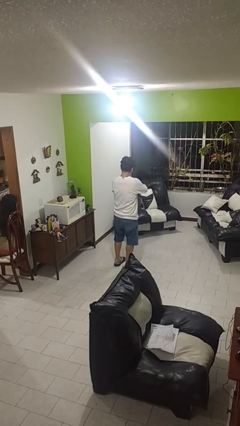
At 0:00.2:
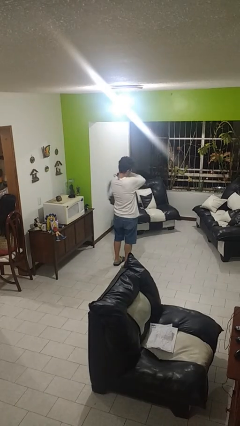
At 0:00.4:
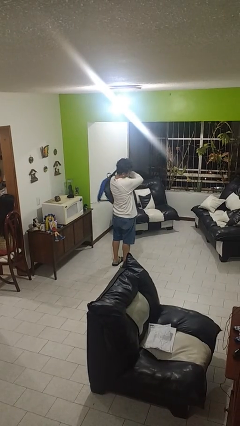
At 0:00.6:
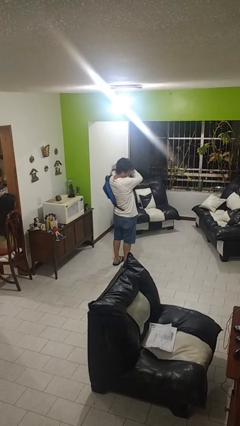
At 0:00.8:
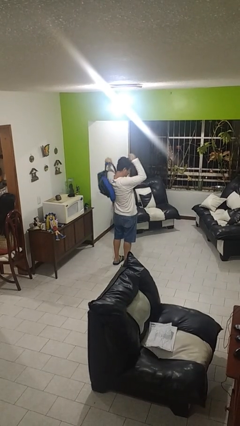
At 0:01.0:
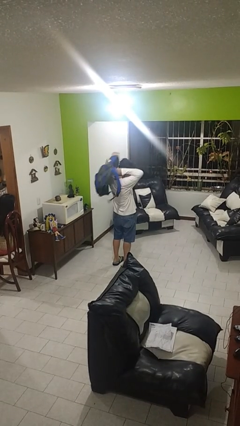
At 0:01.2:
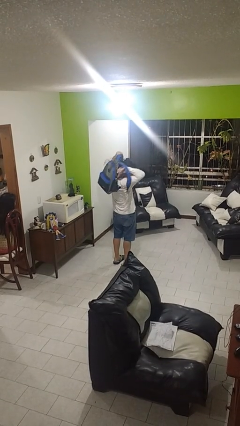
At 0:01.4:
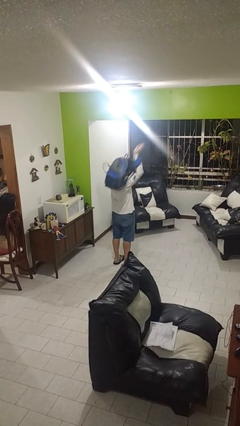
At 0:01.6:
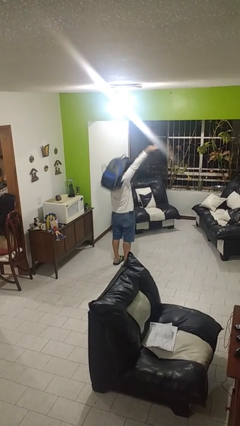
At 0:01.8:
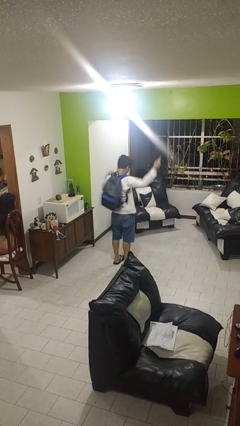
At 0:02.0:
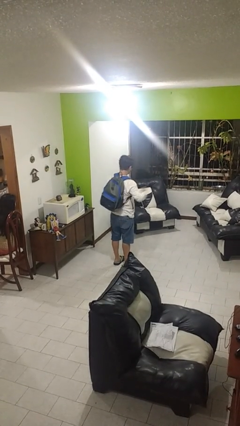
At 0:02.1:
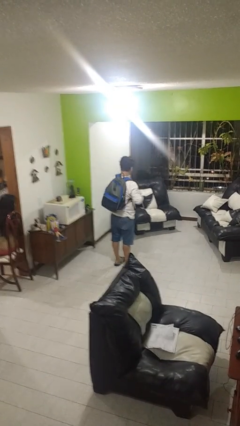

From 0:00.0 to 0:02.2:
person puts on backpack

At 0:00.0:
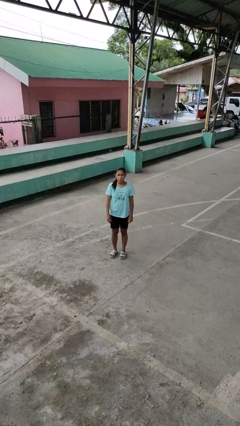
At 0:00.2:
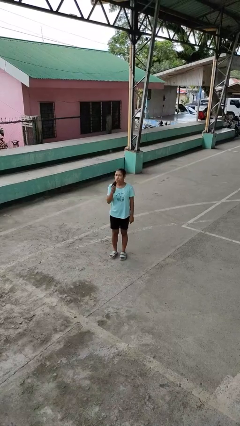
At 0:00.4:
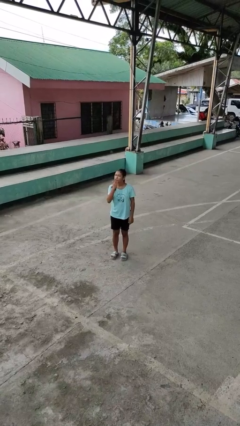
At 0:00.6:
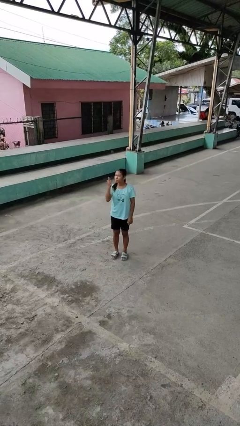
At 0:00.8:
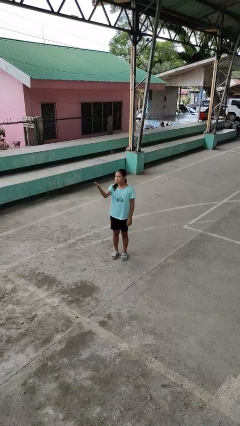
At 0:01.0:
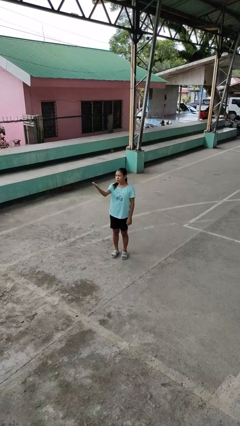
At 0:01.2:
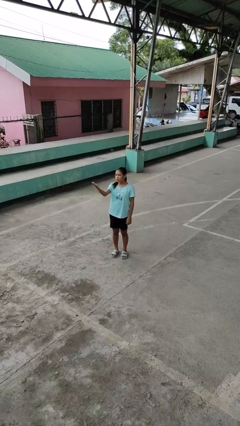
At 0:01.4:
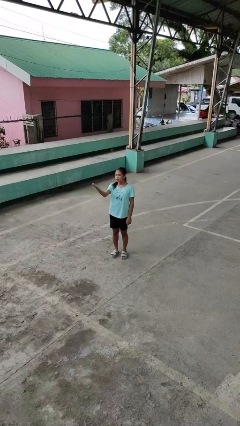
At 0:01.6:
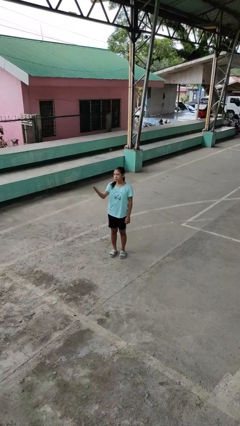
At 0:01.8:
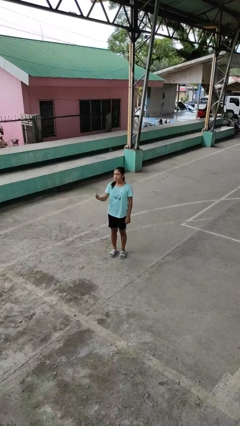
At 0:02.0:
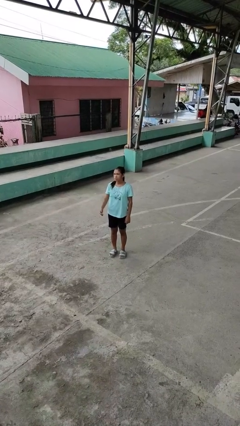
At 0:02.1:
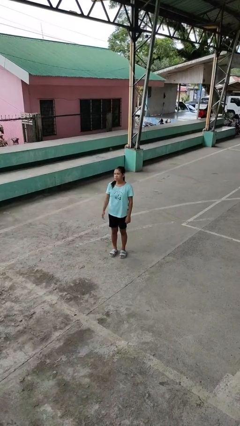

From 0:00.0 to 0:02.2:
person gestures blow kiss

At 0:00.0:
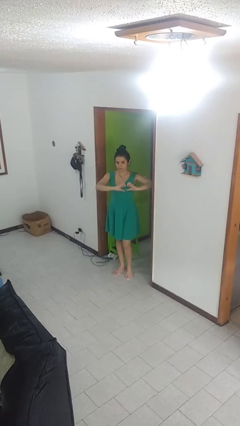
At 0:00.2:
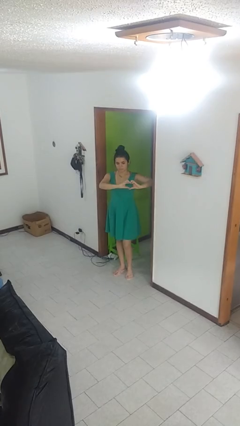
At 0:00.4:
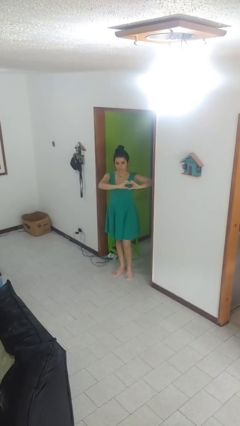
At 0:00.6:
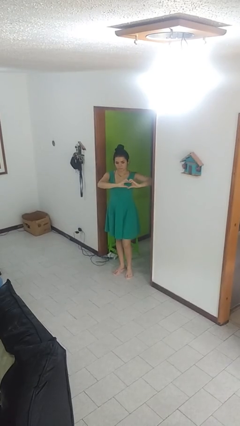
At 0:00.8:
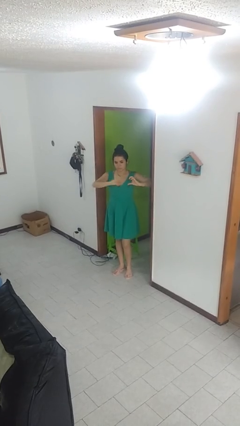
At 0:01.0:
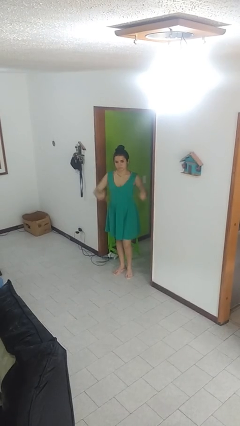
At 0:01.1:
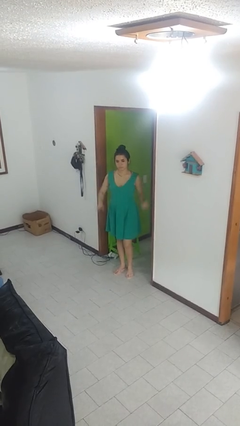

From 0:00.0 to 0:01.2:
person gestures heart

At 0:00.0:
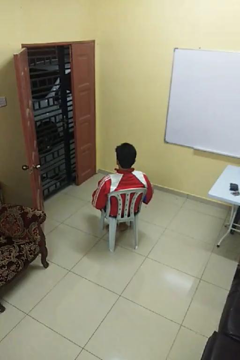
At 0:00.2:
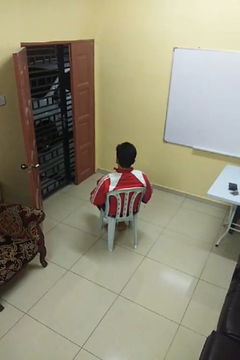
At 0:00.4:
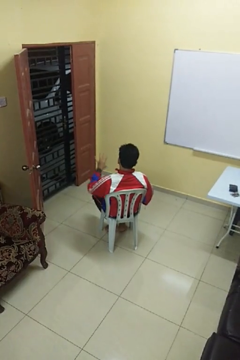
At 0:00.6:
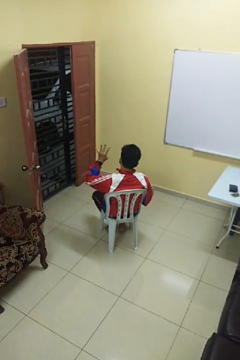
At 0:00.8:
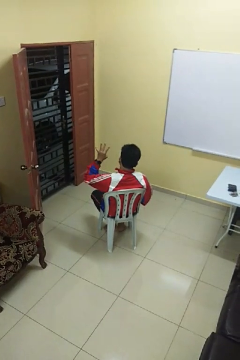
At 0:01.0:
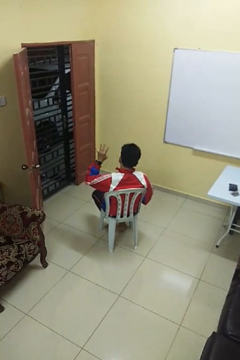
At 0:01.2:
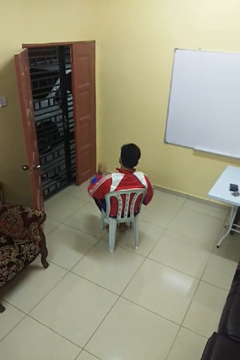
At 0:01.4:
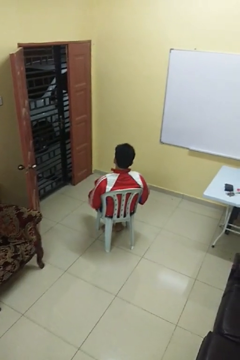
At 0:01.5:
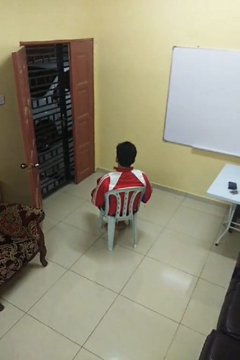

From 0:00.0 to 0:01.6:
person gestures number four

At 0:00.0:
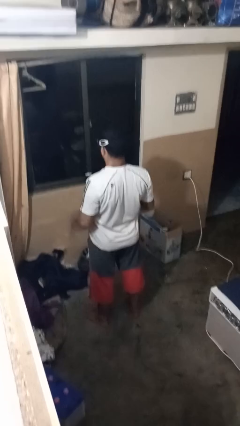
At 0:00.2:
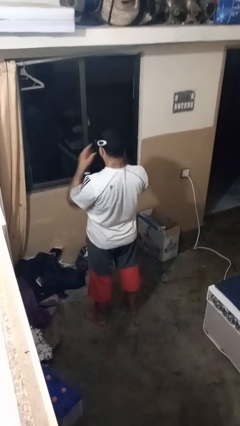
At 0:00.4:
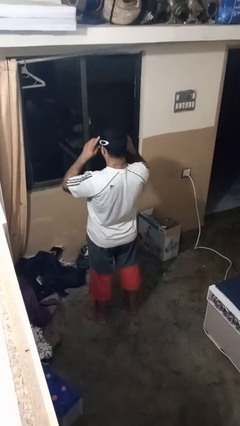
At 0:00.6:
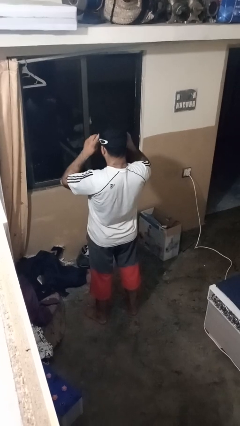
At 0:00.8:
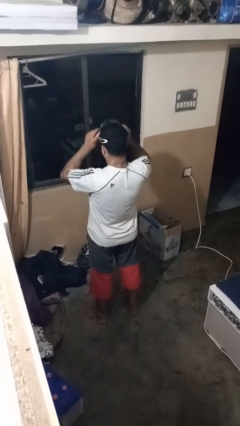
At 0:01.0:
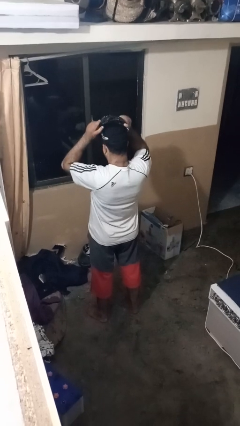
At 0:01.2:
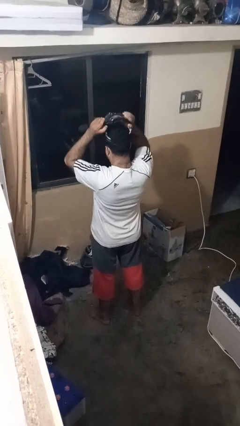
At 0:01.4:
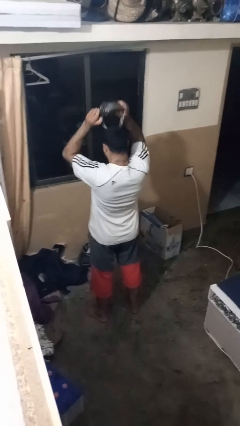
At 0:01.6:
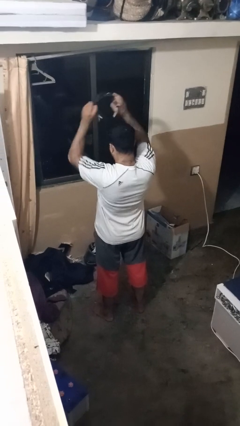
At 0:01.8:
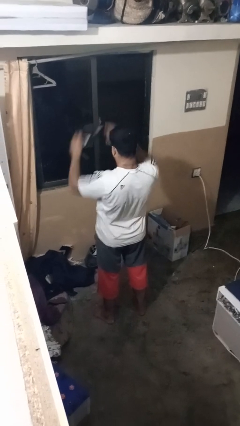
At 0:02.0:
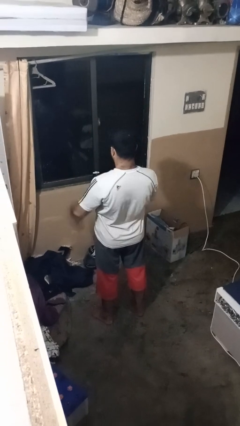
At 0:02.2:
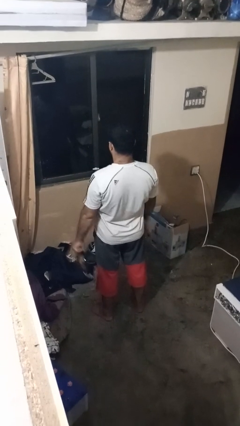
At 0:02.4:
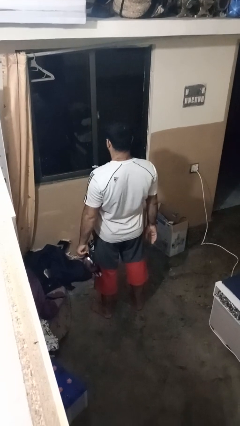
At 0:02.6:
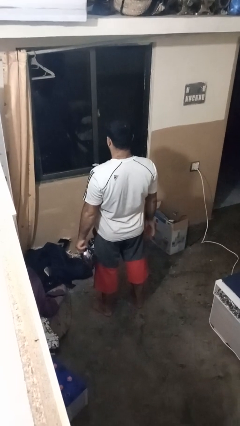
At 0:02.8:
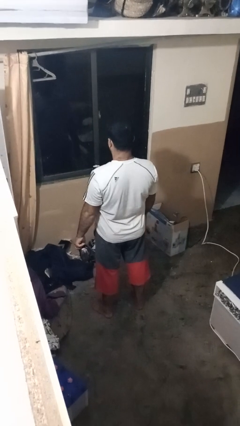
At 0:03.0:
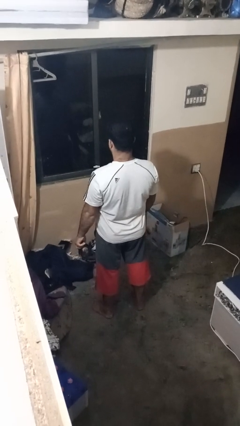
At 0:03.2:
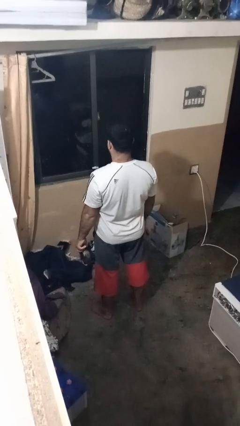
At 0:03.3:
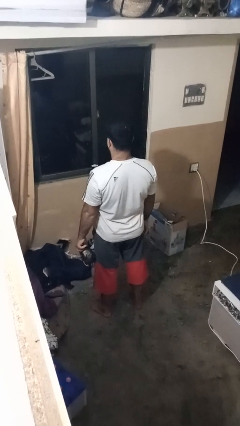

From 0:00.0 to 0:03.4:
person takes off sunglasses

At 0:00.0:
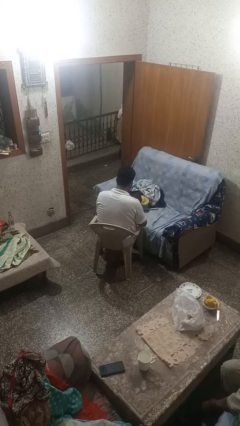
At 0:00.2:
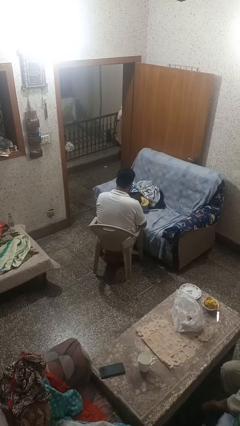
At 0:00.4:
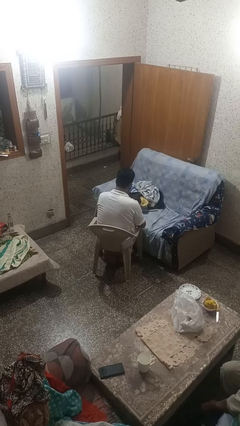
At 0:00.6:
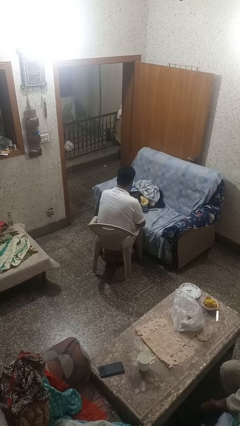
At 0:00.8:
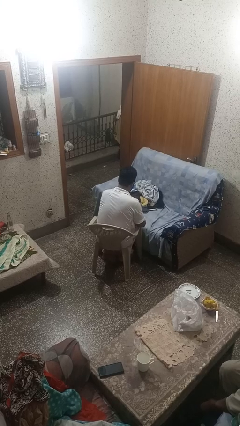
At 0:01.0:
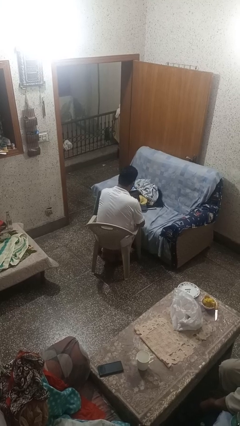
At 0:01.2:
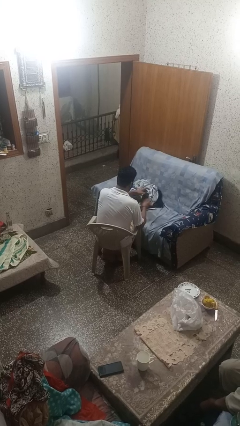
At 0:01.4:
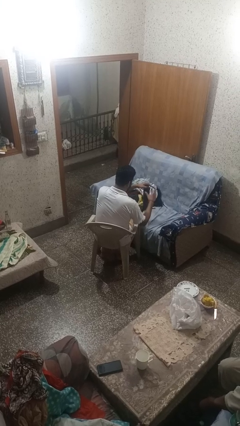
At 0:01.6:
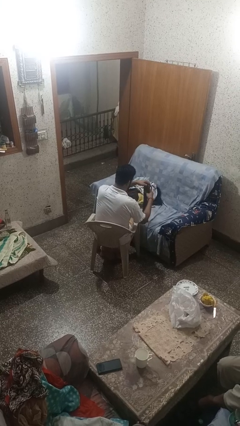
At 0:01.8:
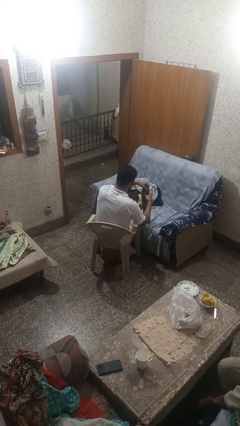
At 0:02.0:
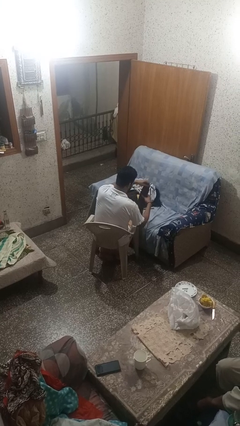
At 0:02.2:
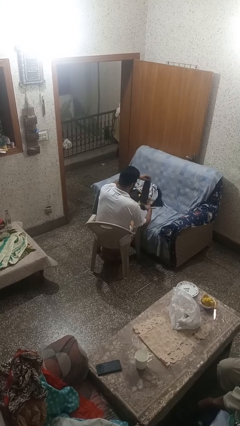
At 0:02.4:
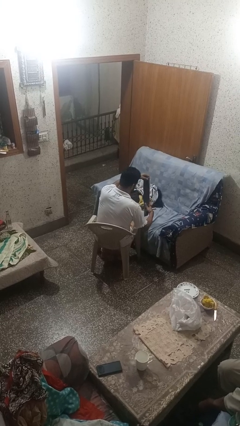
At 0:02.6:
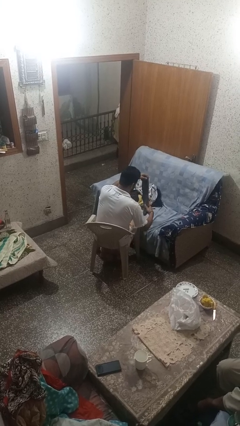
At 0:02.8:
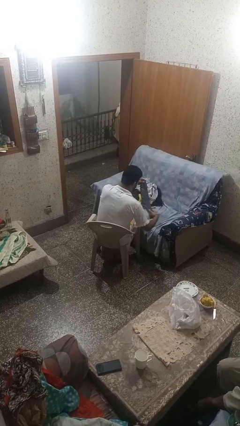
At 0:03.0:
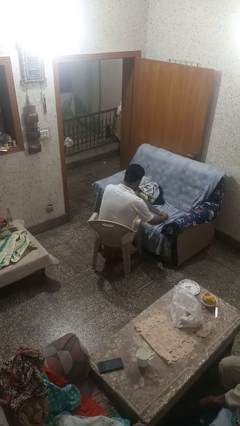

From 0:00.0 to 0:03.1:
person folds socks

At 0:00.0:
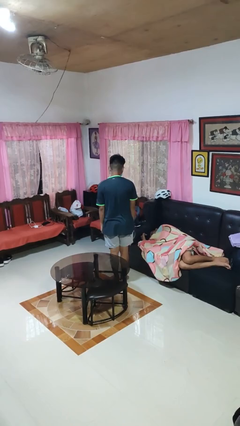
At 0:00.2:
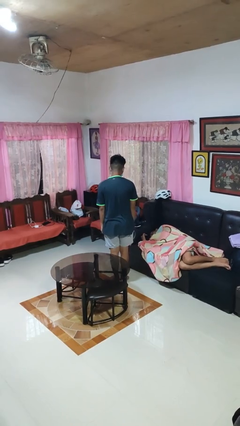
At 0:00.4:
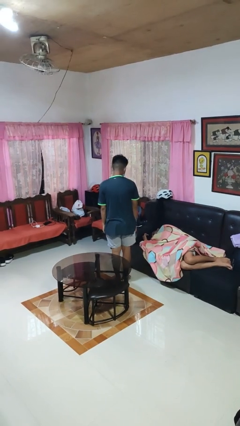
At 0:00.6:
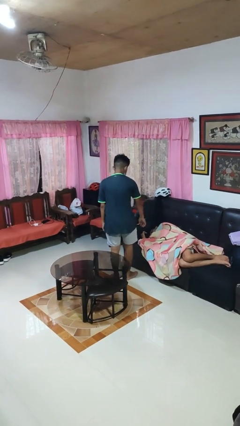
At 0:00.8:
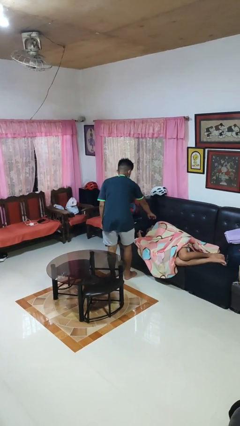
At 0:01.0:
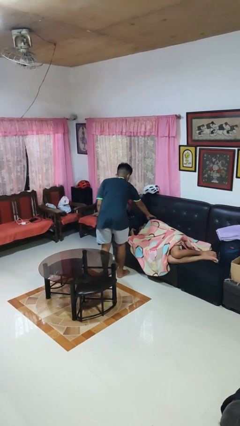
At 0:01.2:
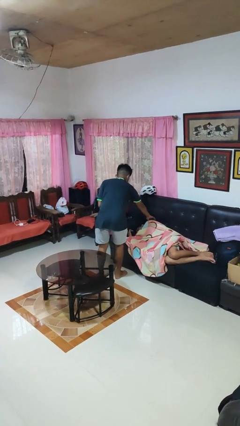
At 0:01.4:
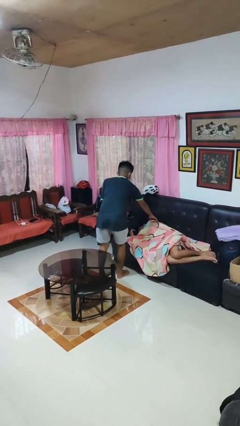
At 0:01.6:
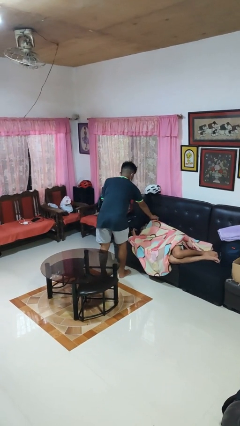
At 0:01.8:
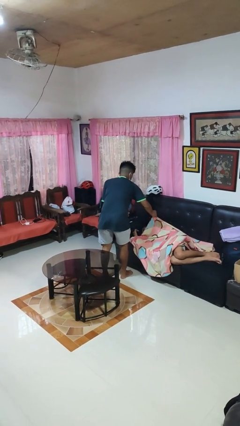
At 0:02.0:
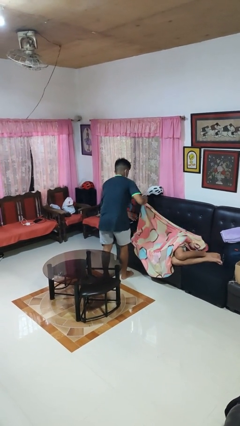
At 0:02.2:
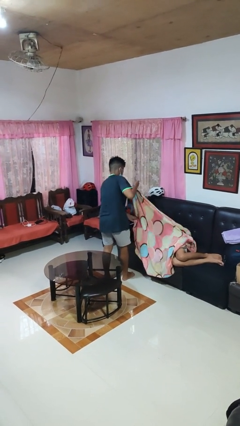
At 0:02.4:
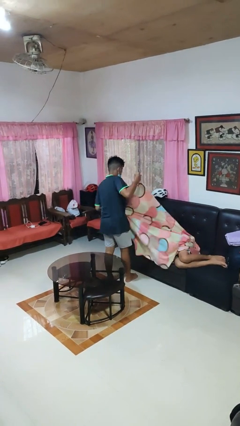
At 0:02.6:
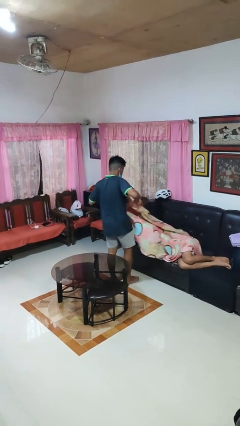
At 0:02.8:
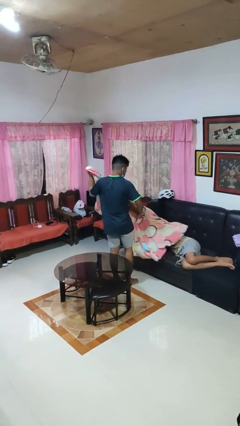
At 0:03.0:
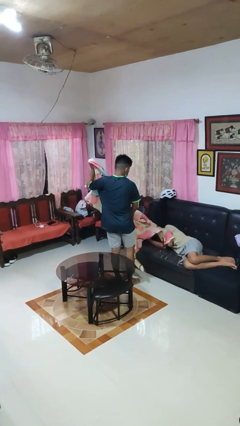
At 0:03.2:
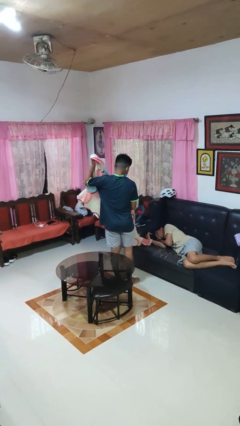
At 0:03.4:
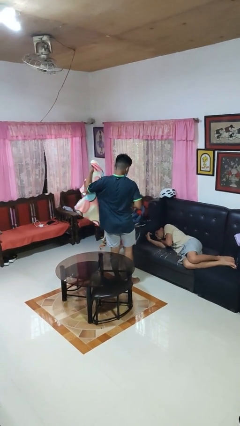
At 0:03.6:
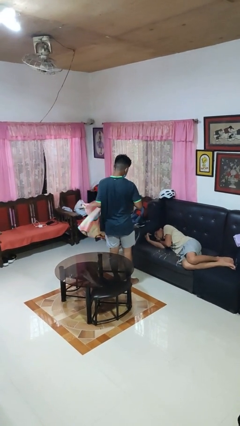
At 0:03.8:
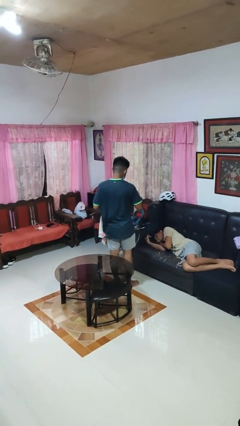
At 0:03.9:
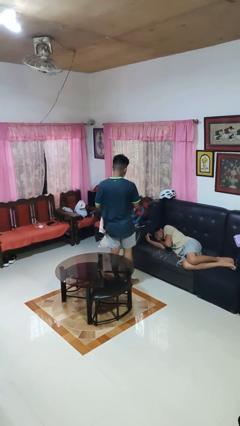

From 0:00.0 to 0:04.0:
person uncovers friend with blanket
